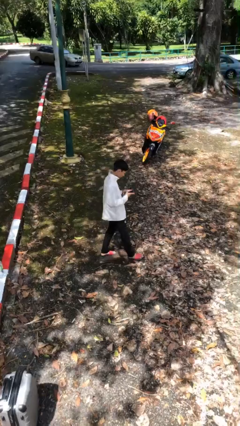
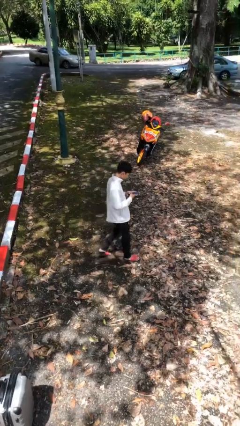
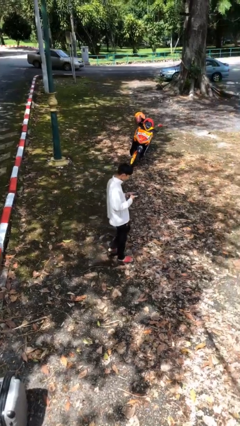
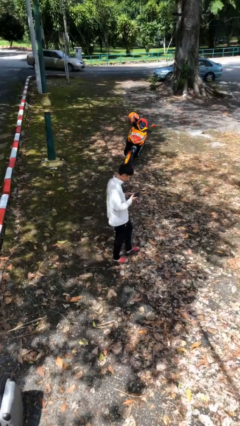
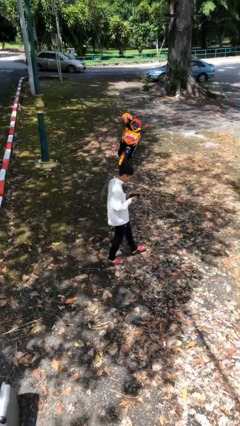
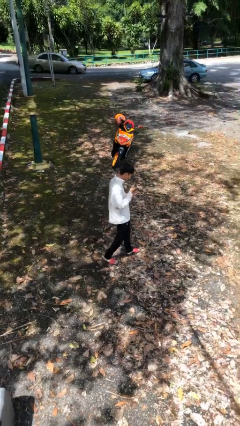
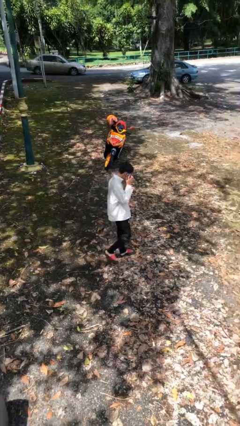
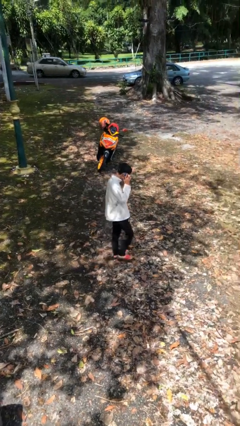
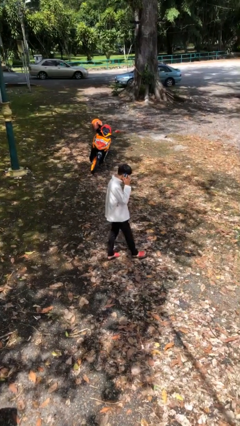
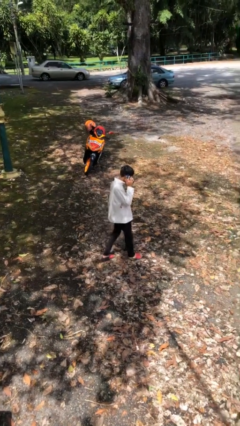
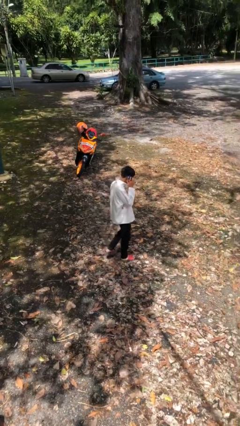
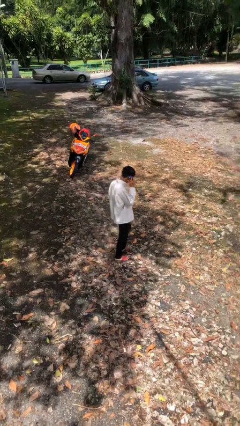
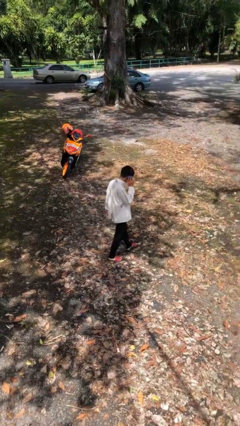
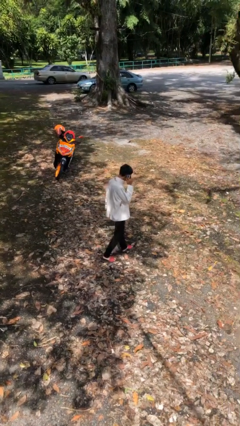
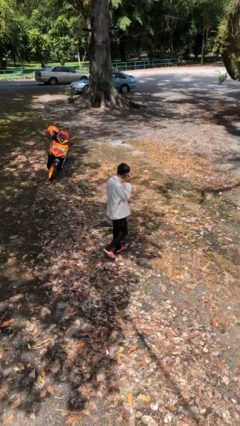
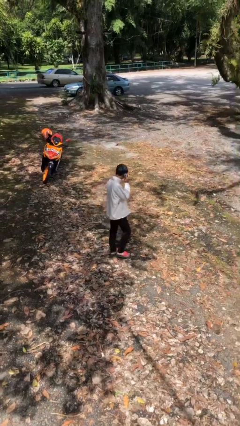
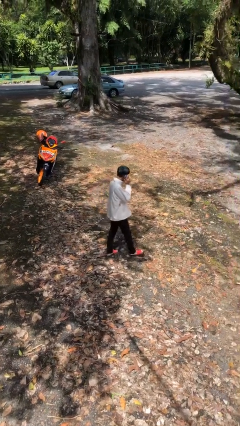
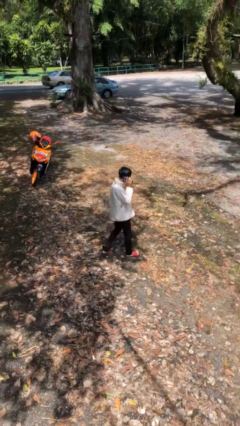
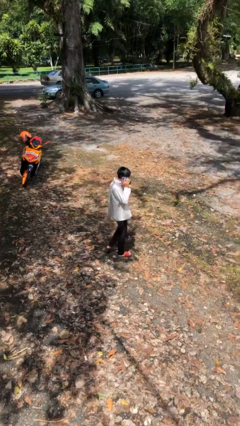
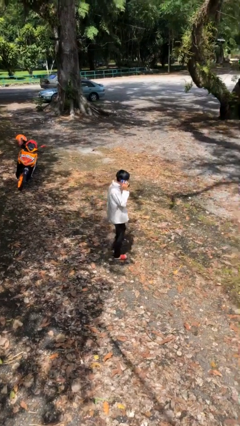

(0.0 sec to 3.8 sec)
person talks on phone

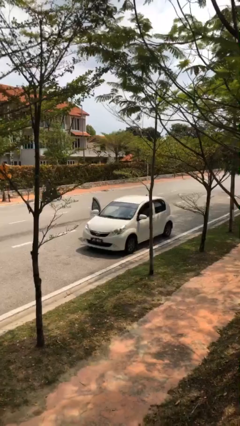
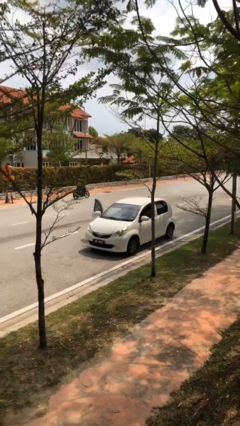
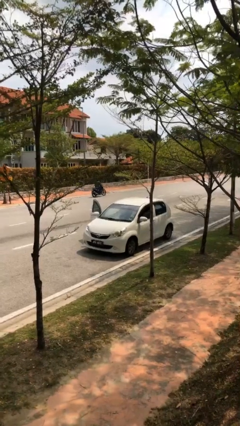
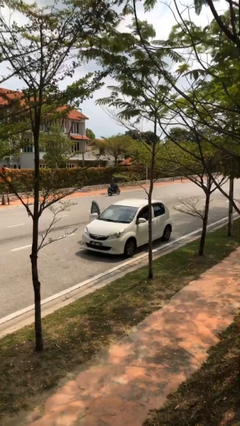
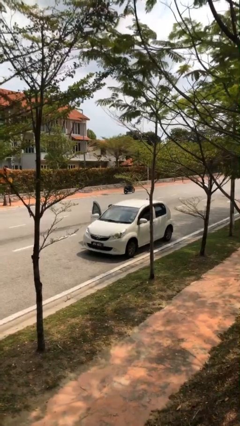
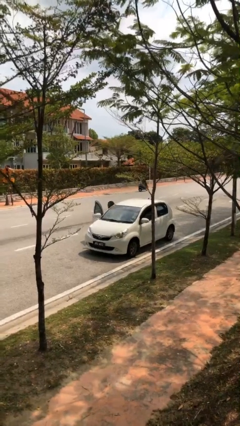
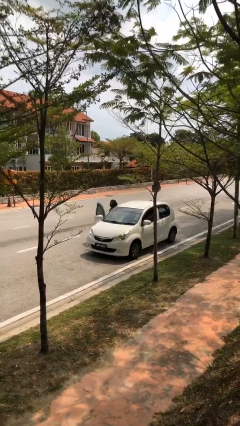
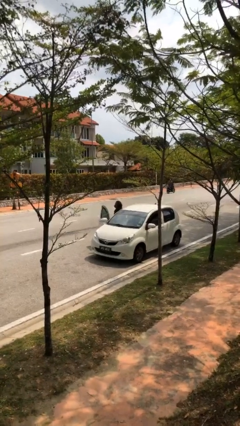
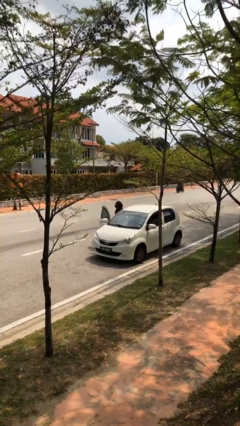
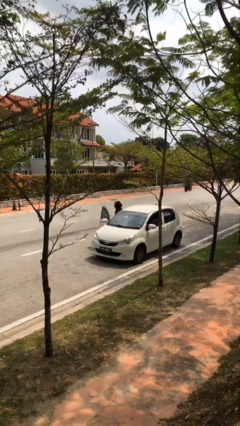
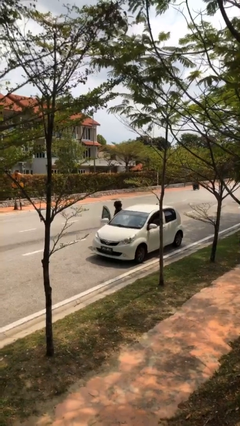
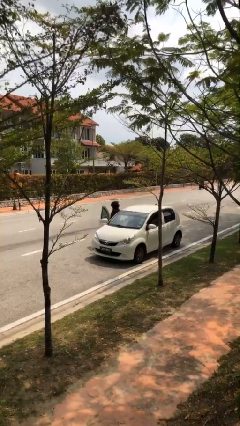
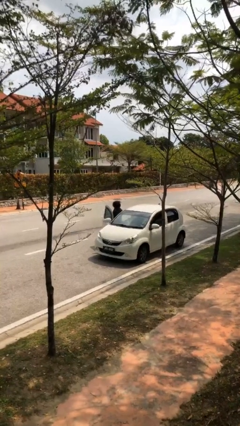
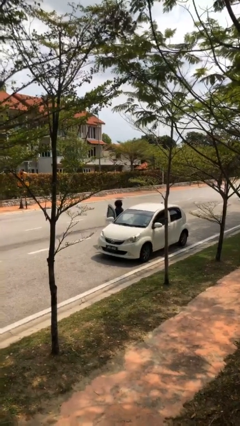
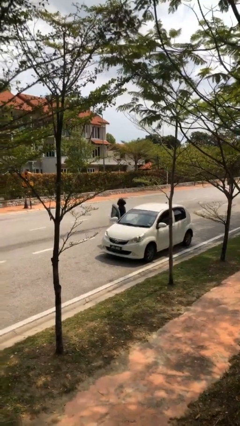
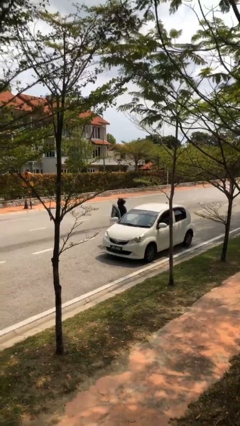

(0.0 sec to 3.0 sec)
person exits car

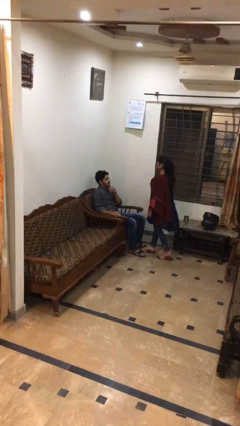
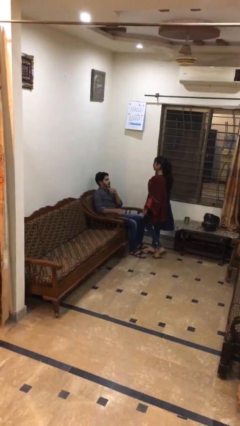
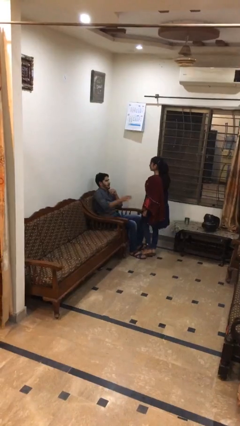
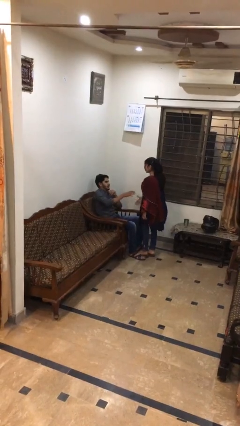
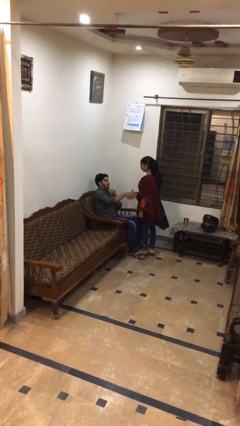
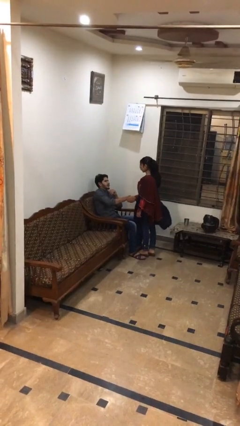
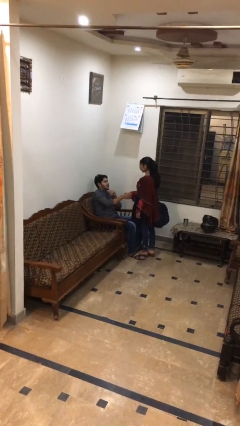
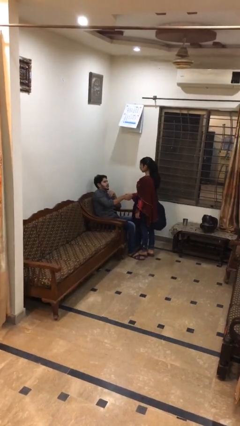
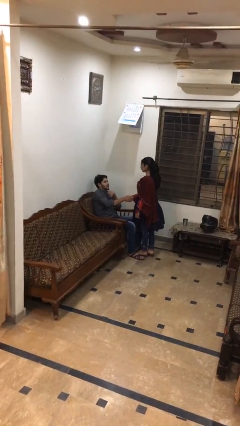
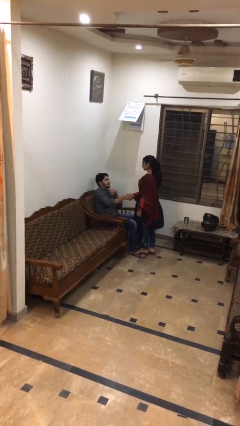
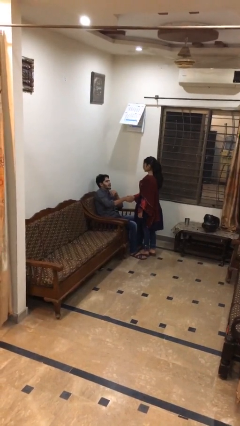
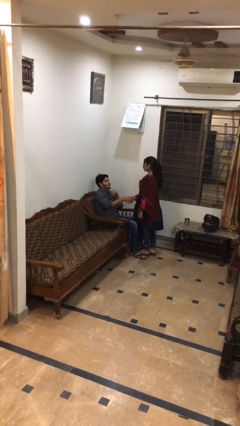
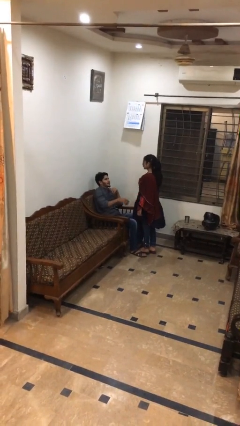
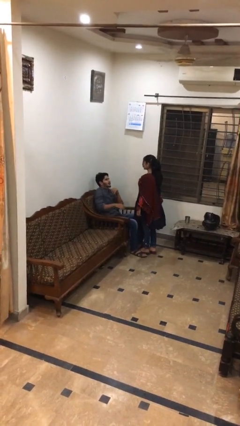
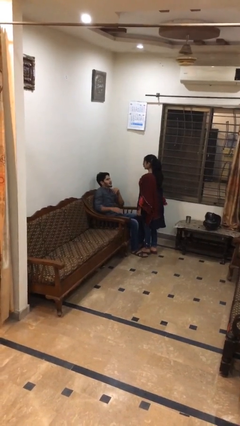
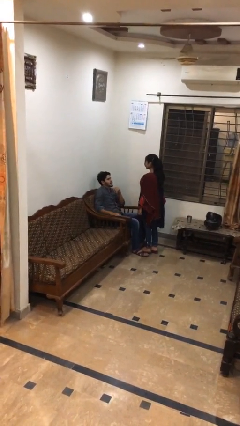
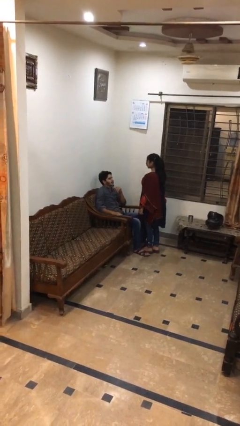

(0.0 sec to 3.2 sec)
person shakes hand

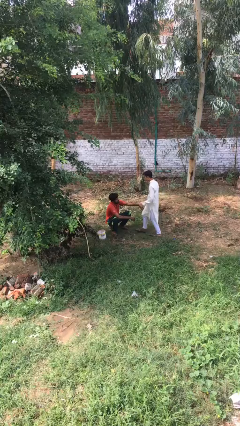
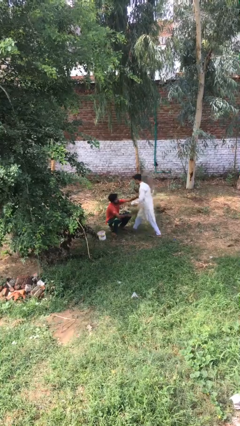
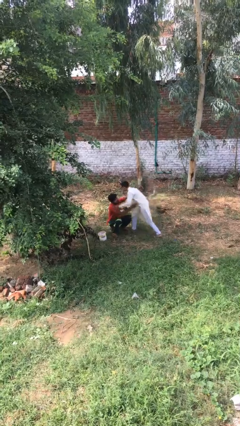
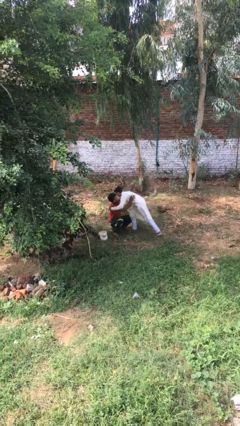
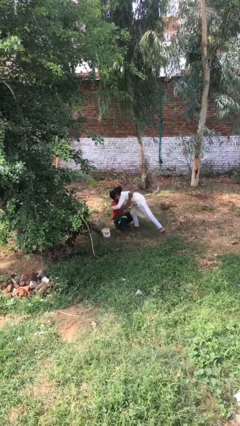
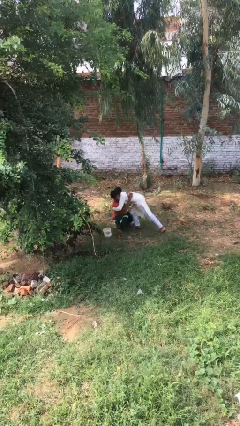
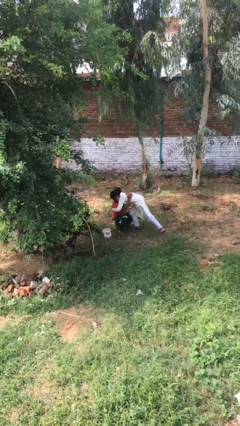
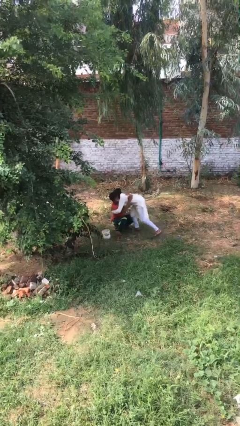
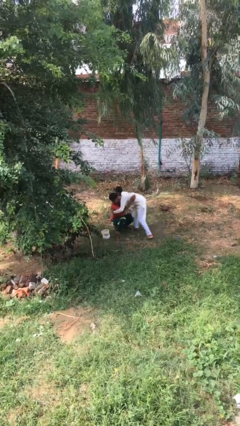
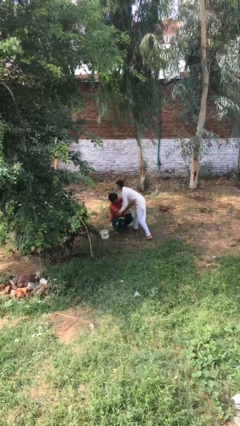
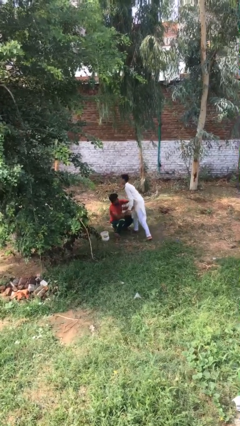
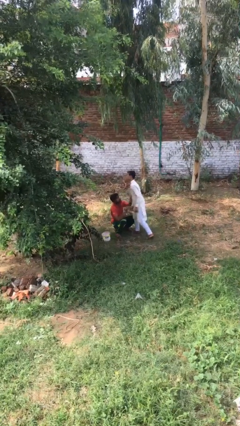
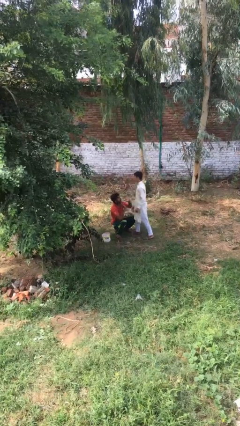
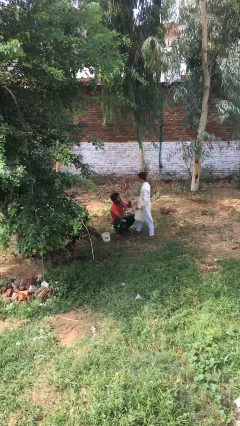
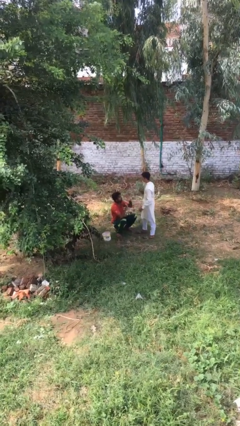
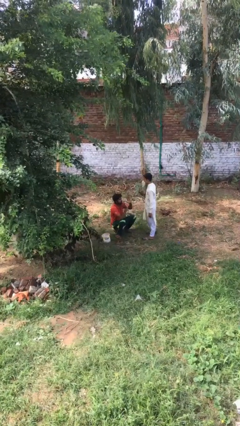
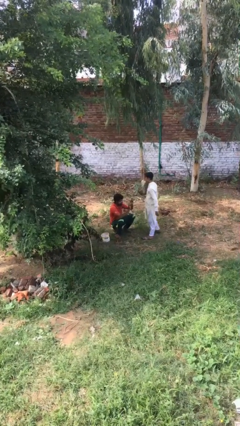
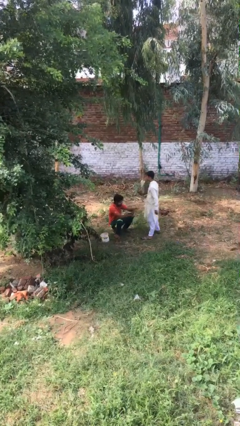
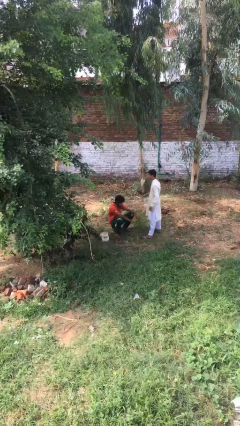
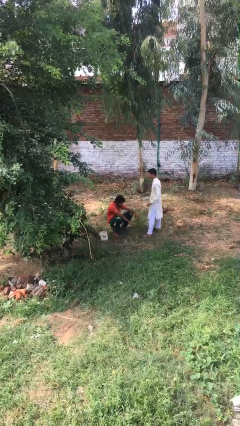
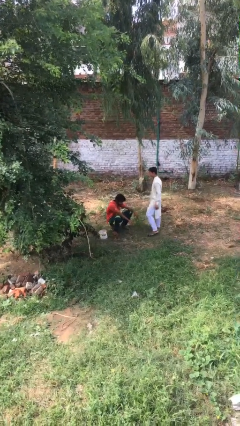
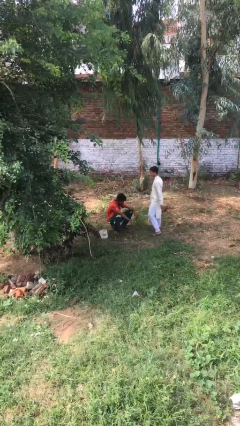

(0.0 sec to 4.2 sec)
person embraces person

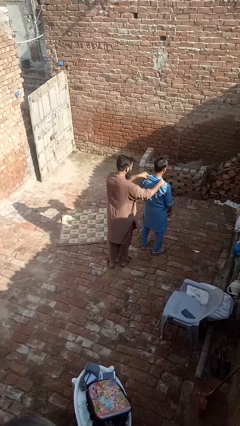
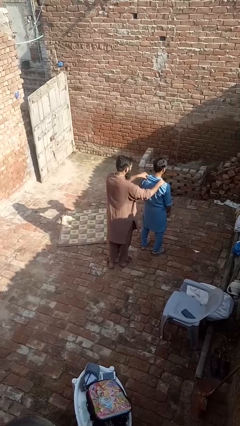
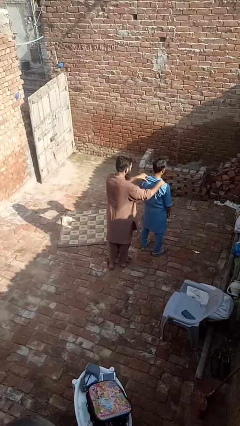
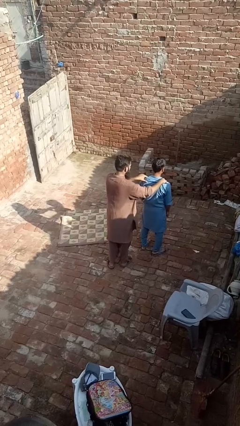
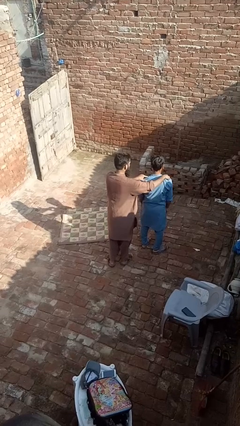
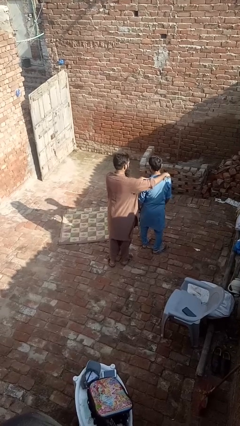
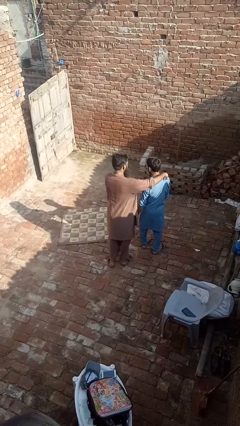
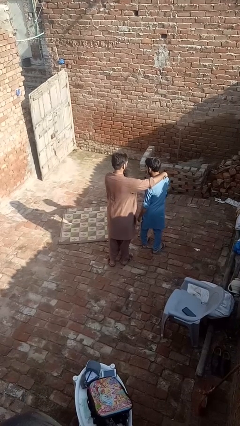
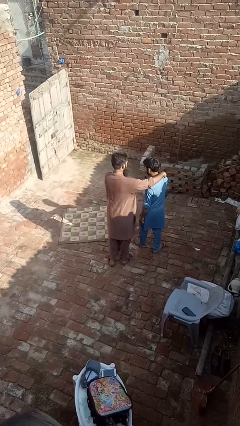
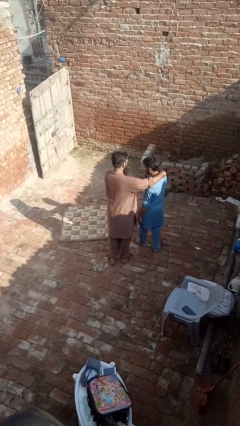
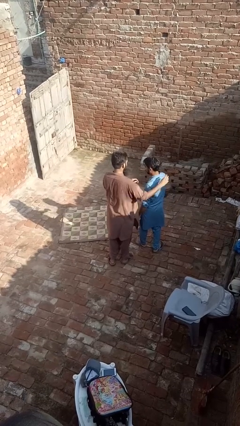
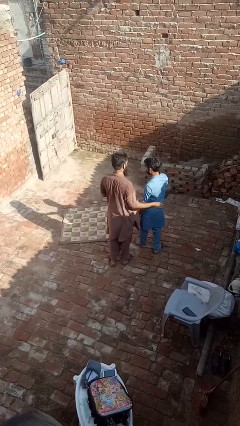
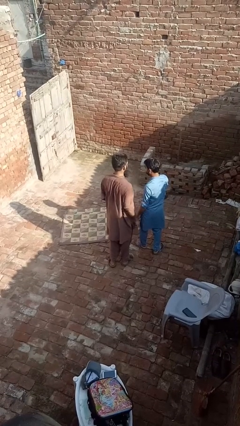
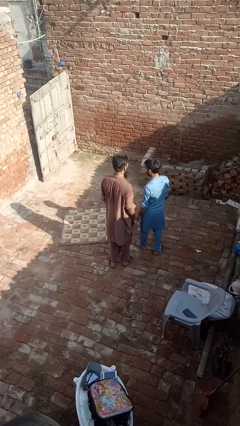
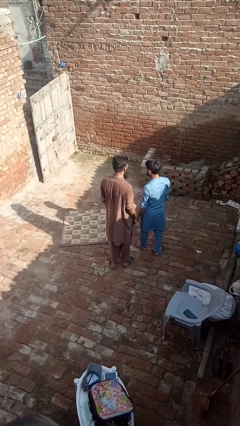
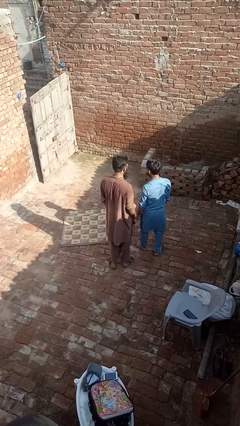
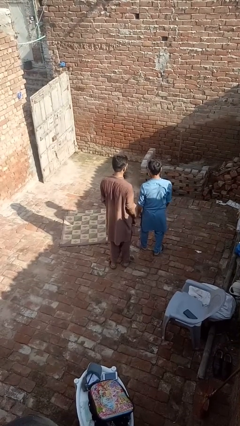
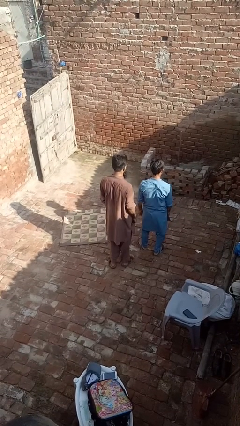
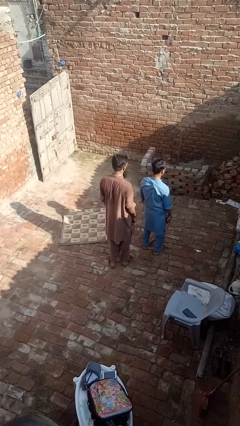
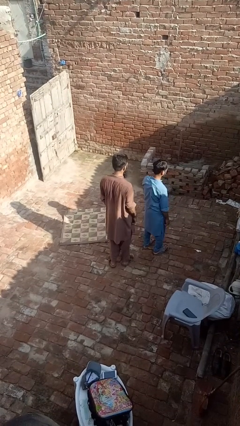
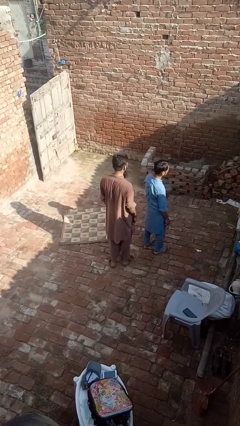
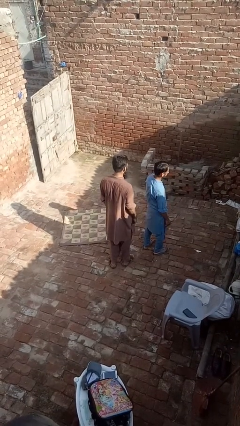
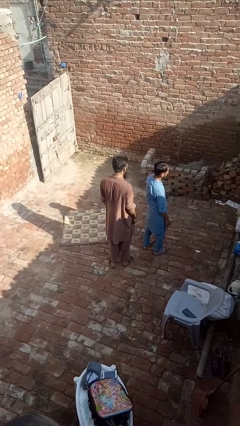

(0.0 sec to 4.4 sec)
person spins person around
